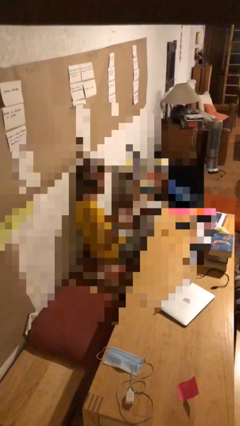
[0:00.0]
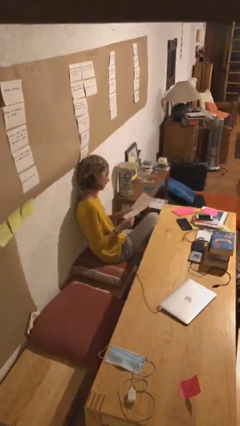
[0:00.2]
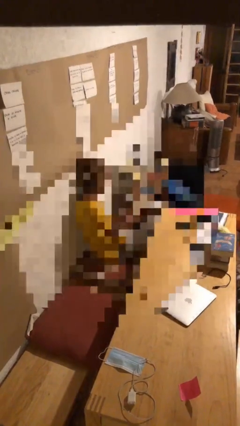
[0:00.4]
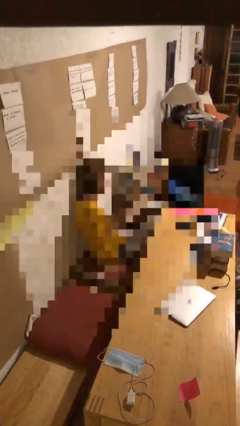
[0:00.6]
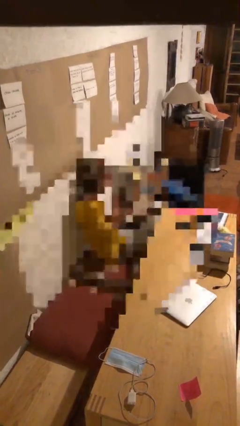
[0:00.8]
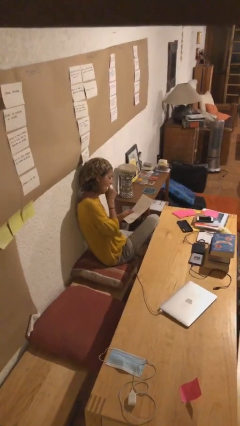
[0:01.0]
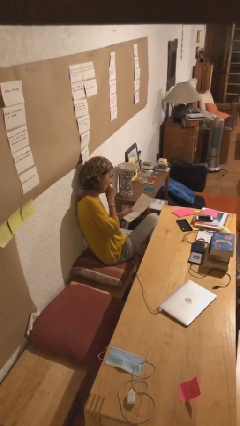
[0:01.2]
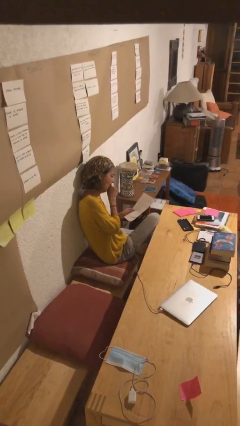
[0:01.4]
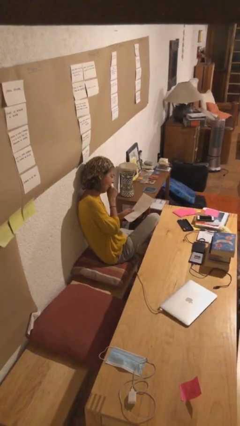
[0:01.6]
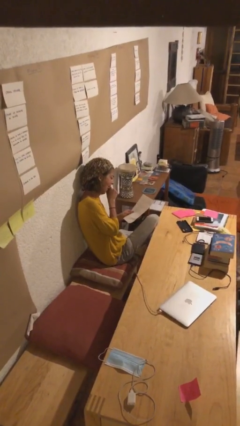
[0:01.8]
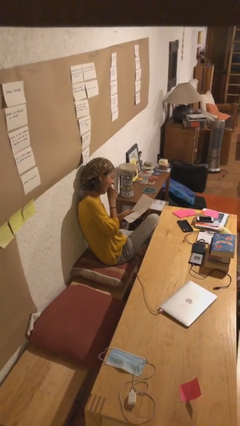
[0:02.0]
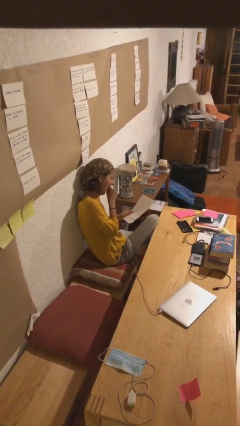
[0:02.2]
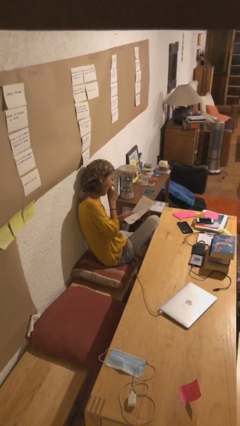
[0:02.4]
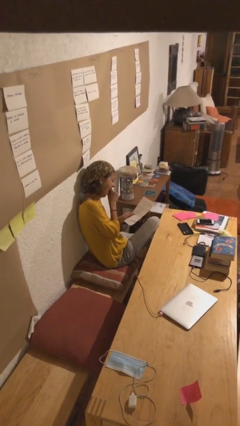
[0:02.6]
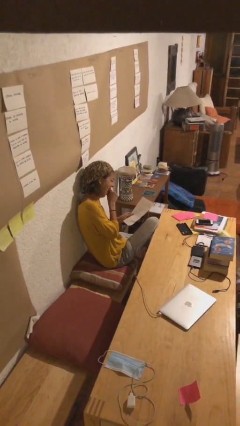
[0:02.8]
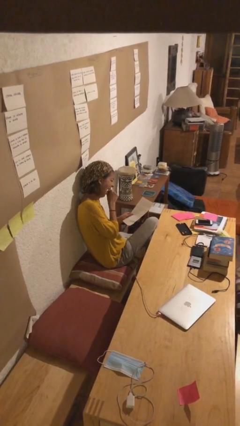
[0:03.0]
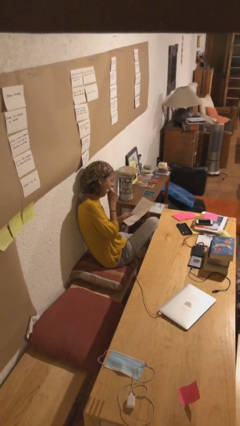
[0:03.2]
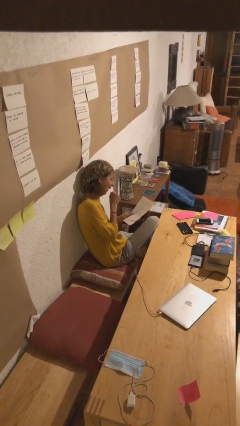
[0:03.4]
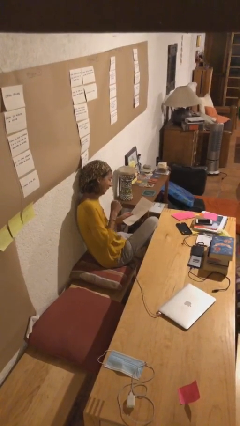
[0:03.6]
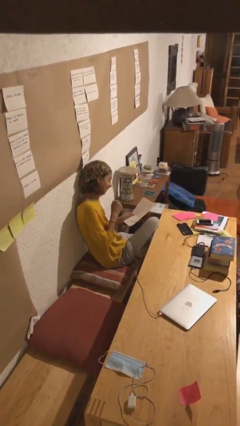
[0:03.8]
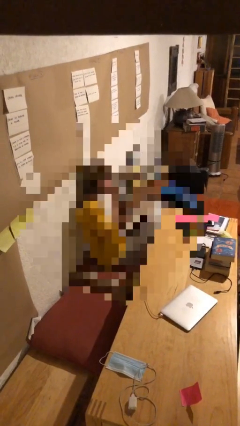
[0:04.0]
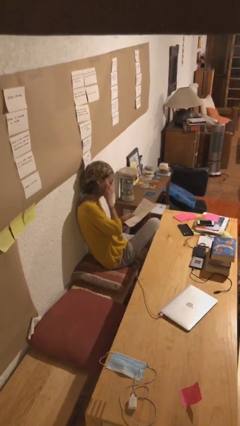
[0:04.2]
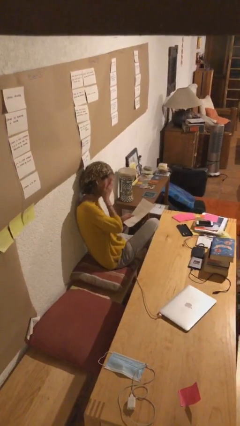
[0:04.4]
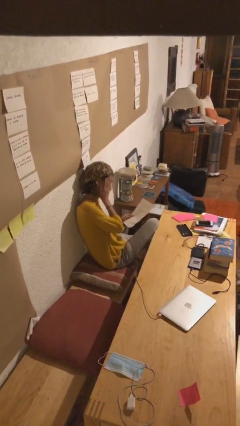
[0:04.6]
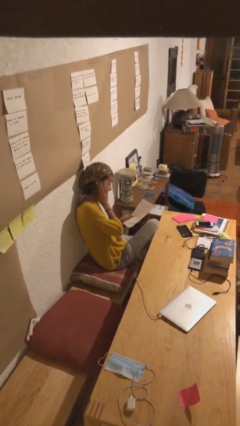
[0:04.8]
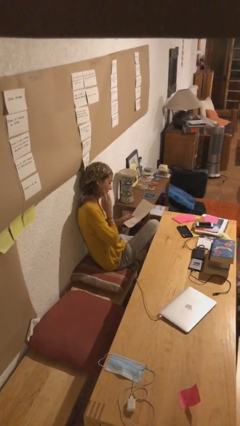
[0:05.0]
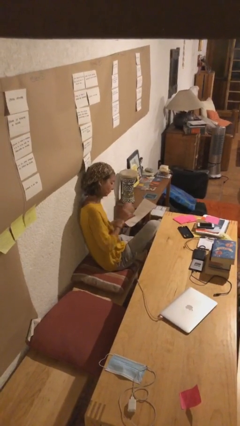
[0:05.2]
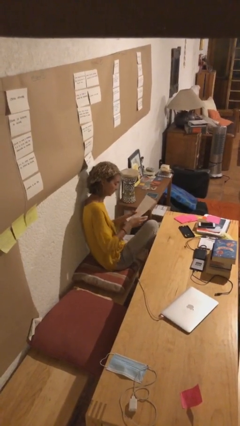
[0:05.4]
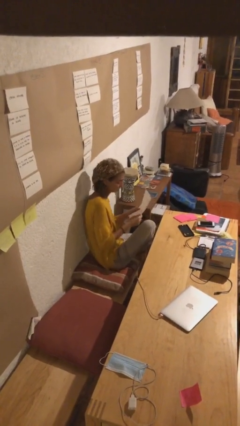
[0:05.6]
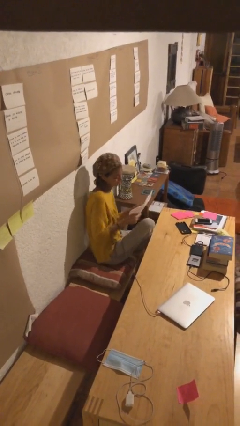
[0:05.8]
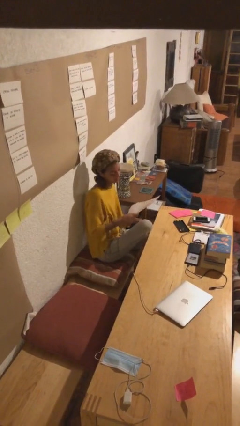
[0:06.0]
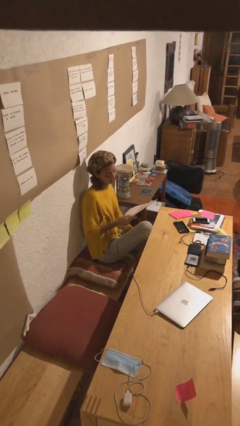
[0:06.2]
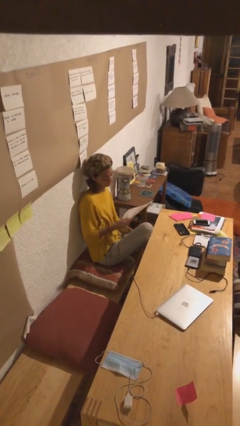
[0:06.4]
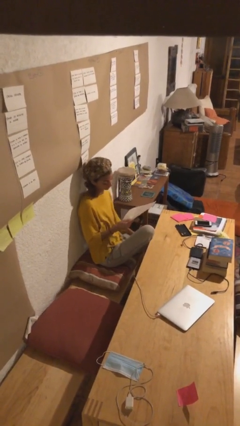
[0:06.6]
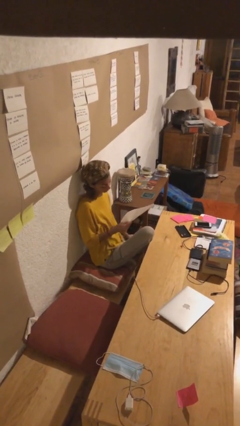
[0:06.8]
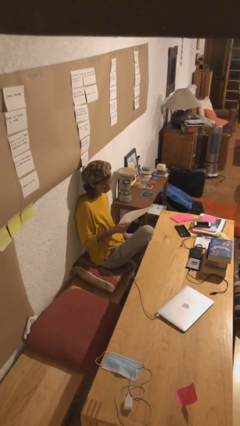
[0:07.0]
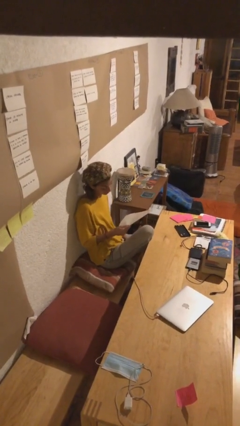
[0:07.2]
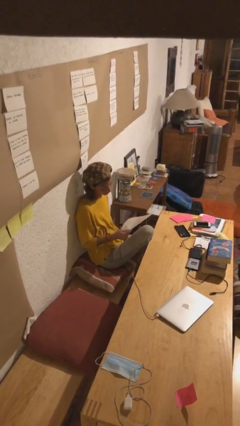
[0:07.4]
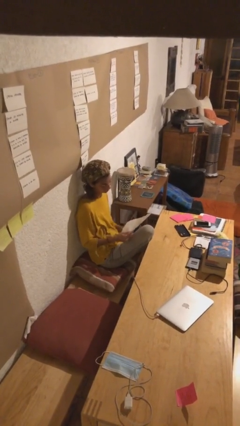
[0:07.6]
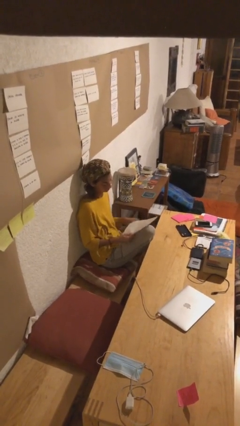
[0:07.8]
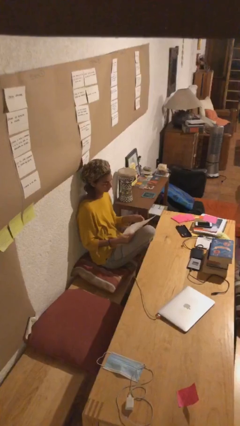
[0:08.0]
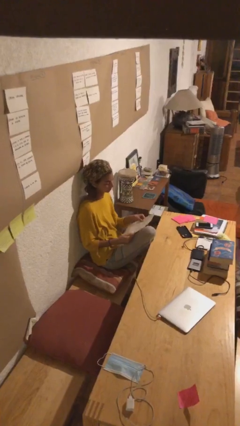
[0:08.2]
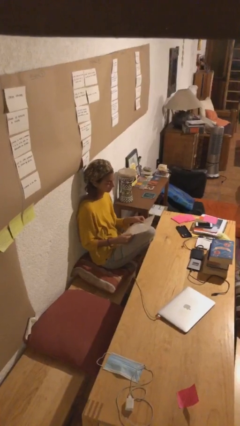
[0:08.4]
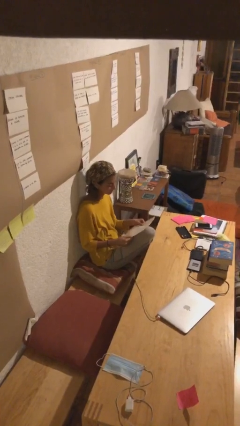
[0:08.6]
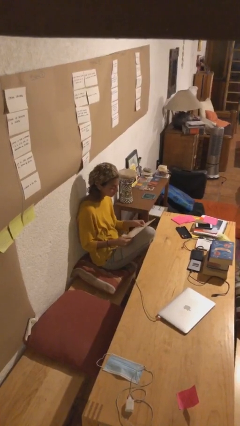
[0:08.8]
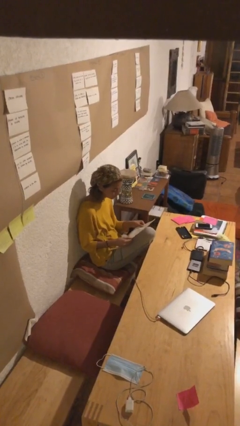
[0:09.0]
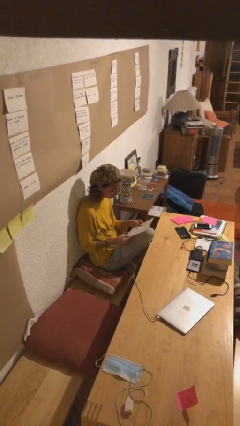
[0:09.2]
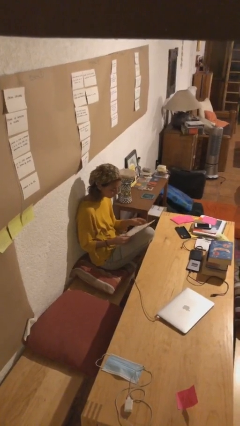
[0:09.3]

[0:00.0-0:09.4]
person reads document

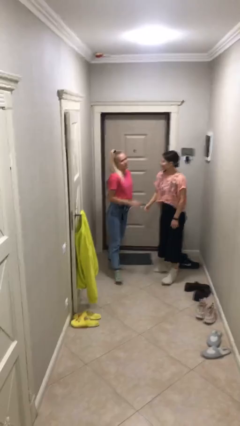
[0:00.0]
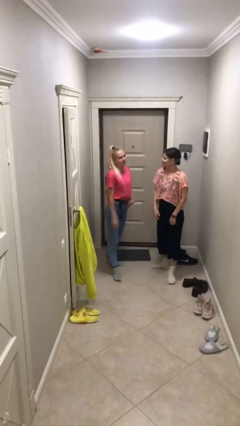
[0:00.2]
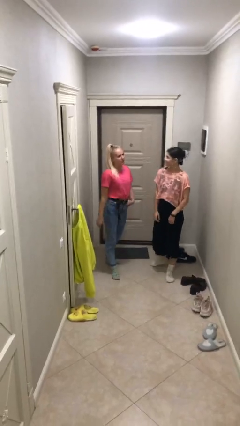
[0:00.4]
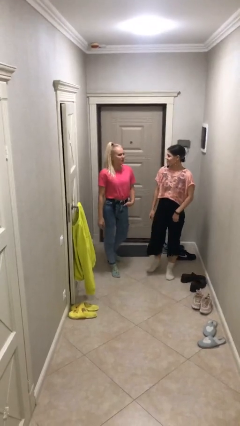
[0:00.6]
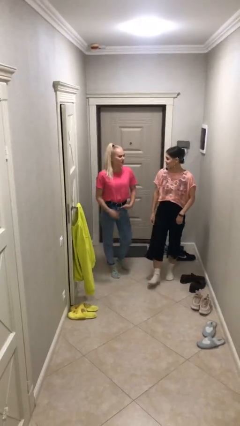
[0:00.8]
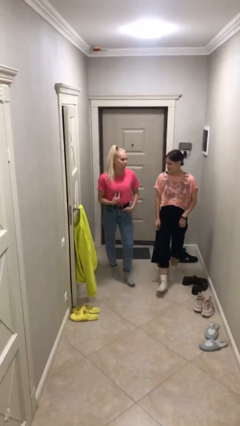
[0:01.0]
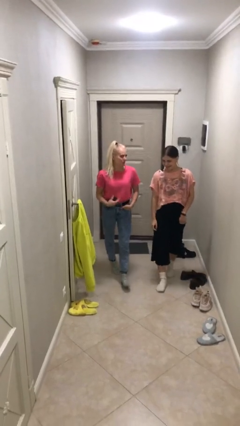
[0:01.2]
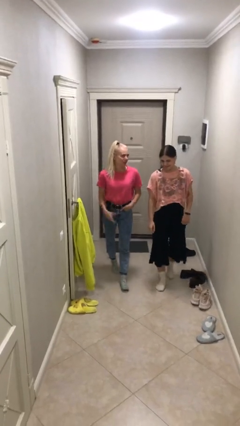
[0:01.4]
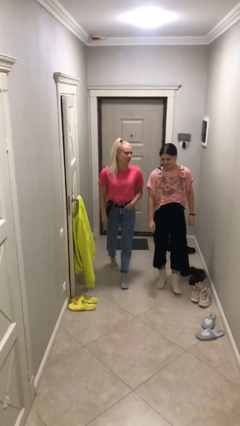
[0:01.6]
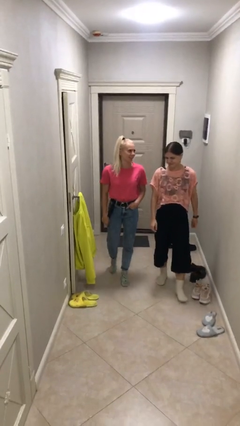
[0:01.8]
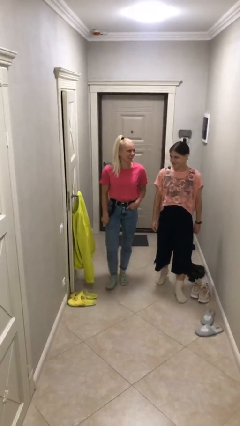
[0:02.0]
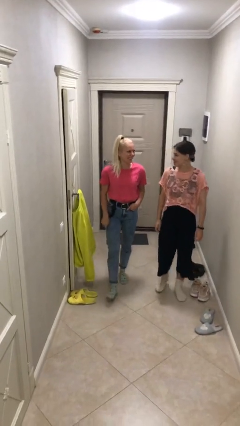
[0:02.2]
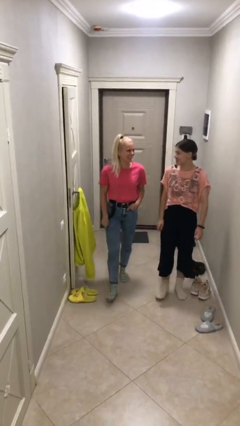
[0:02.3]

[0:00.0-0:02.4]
person talks to person

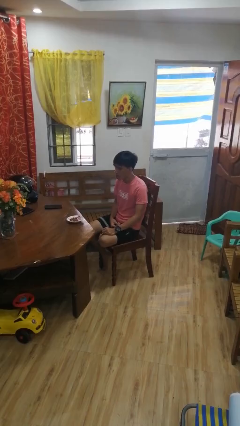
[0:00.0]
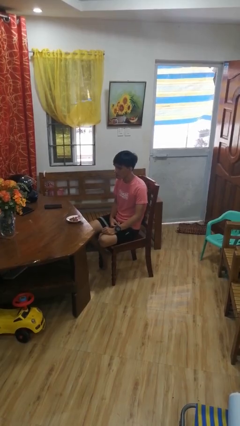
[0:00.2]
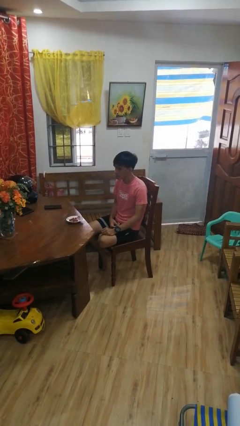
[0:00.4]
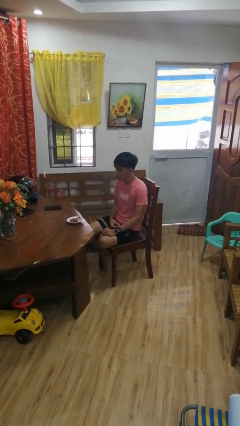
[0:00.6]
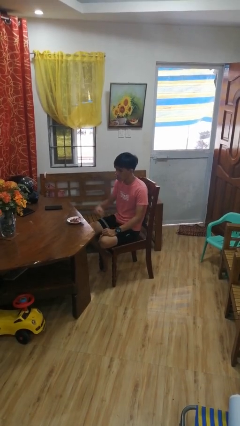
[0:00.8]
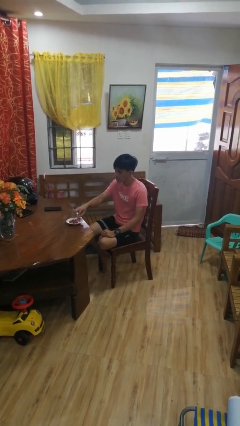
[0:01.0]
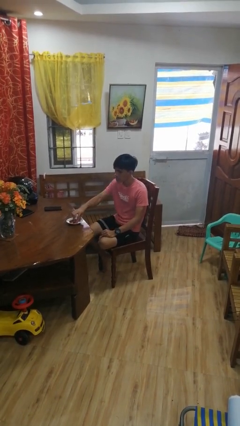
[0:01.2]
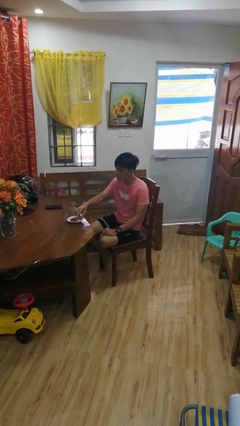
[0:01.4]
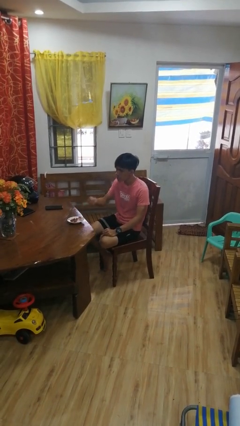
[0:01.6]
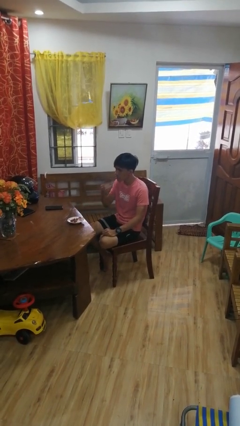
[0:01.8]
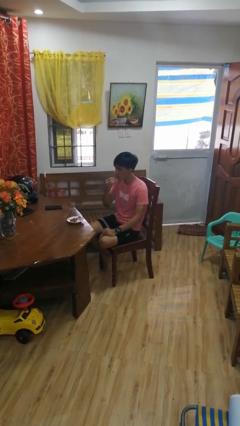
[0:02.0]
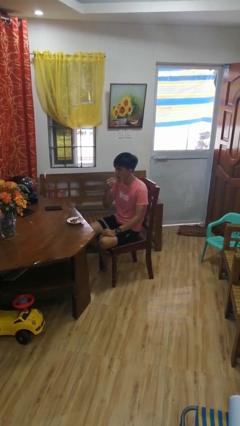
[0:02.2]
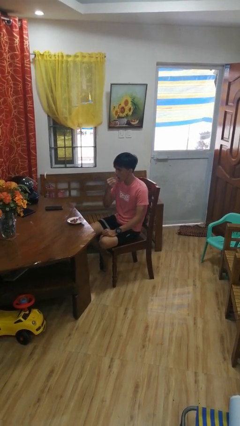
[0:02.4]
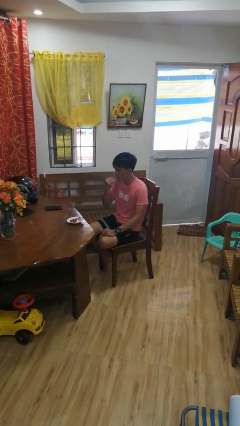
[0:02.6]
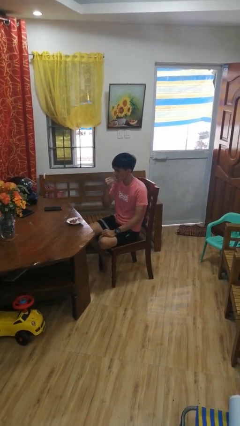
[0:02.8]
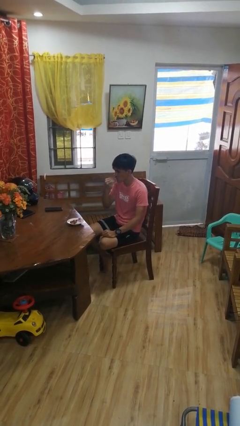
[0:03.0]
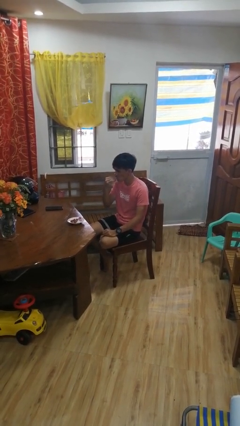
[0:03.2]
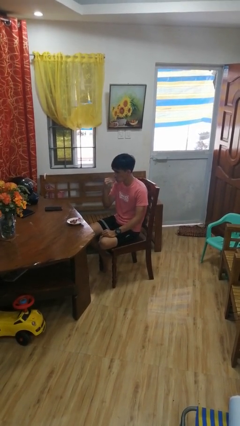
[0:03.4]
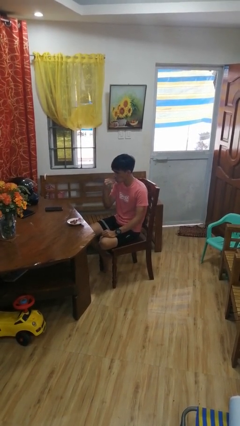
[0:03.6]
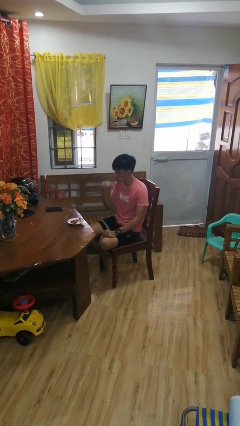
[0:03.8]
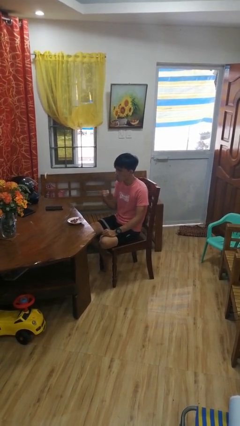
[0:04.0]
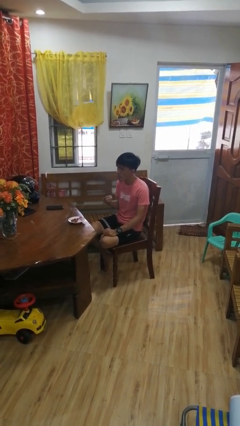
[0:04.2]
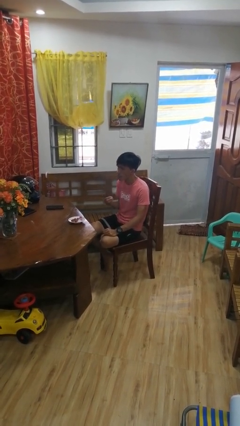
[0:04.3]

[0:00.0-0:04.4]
person eats with hands

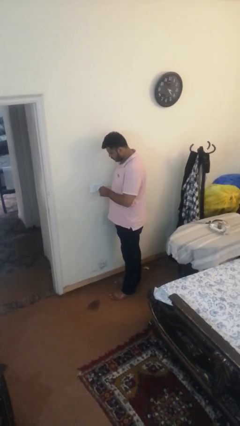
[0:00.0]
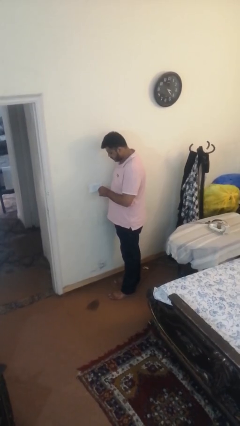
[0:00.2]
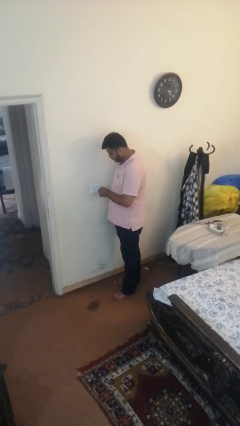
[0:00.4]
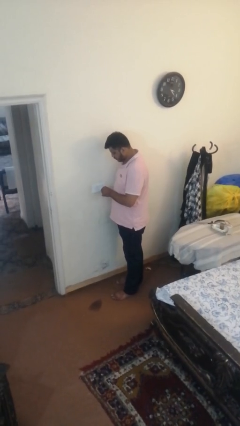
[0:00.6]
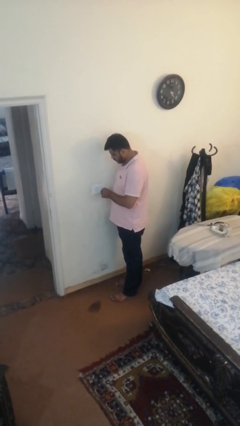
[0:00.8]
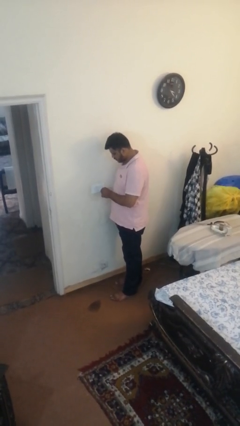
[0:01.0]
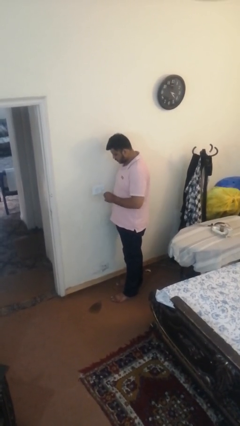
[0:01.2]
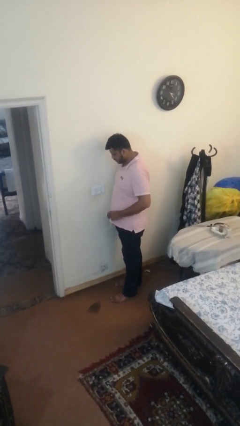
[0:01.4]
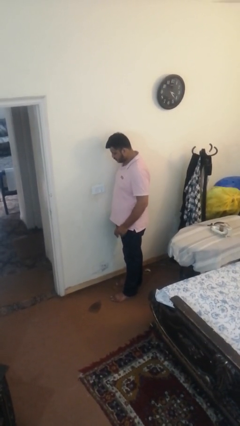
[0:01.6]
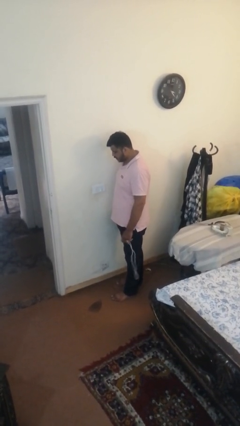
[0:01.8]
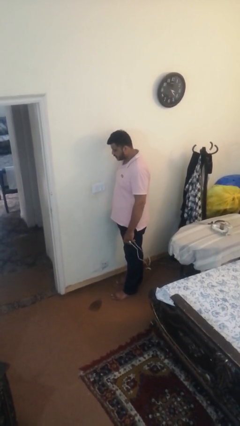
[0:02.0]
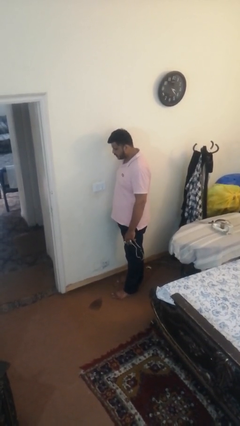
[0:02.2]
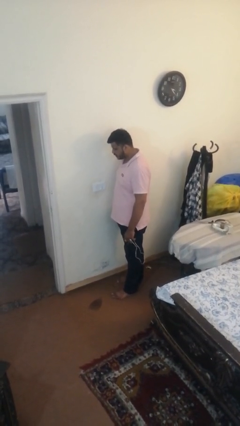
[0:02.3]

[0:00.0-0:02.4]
person unplugs from electrical socket
